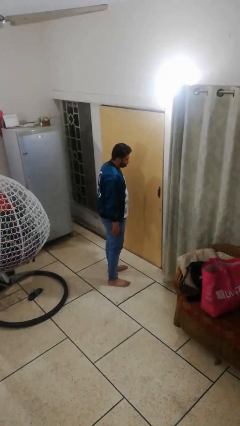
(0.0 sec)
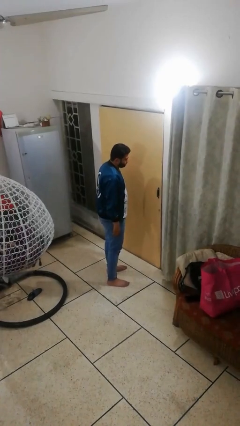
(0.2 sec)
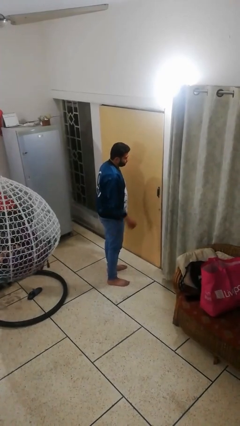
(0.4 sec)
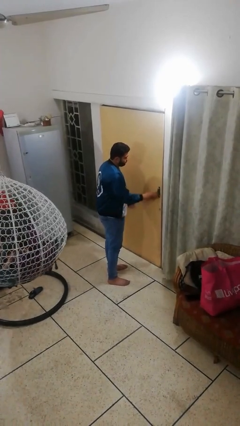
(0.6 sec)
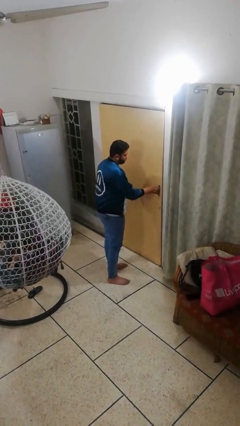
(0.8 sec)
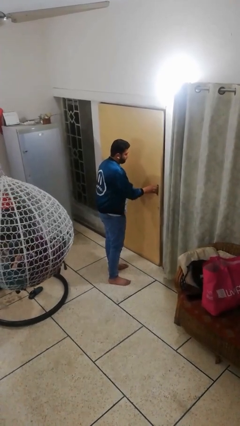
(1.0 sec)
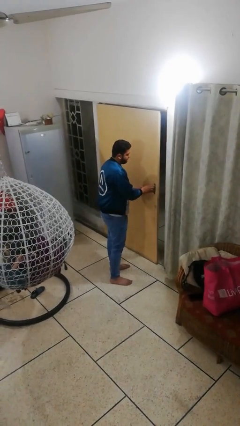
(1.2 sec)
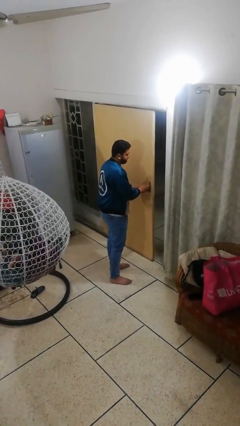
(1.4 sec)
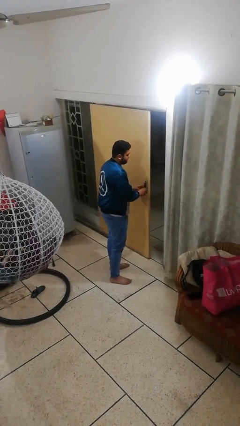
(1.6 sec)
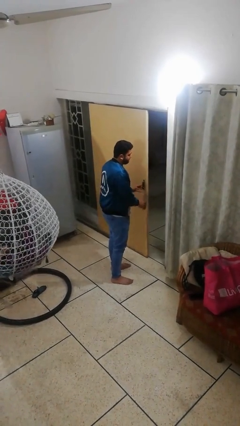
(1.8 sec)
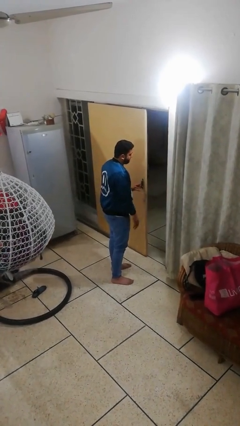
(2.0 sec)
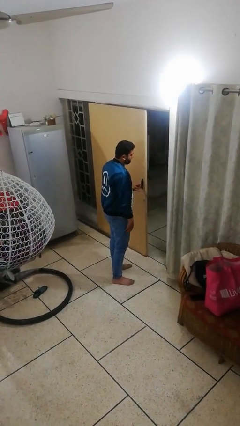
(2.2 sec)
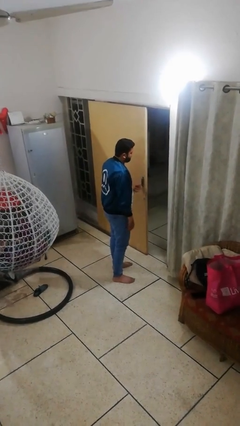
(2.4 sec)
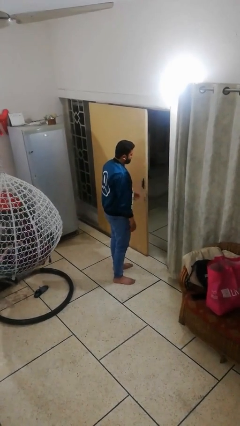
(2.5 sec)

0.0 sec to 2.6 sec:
person opens facility door

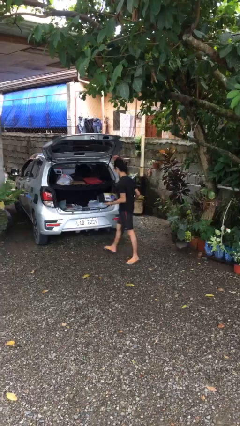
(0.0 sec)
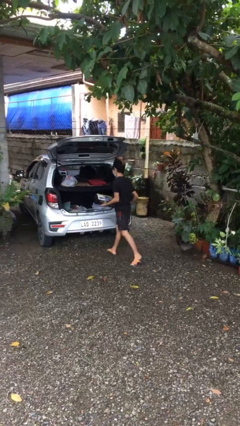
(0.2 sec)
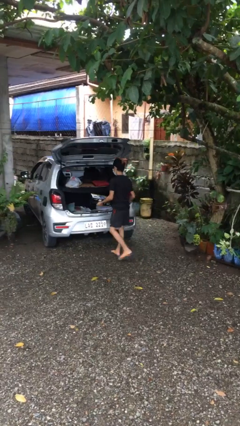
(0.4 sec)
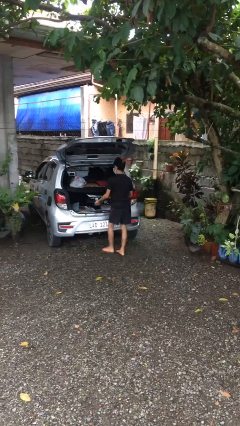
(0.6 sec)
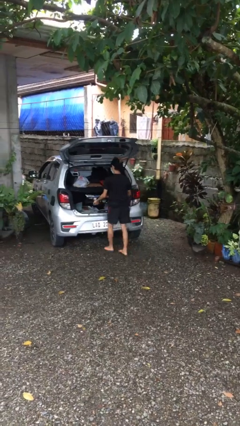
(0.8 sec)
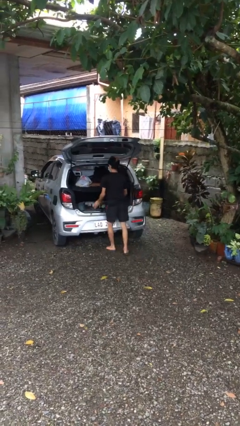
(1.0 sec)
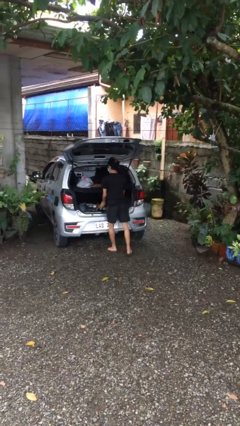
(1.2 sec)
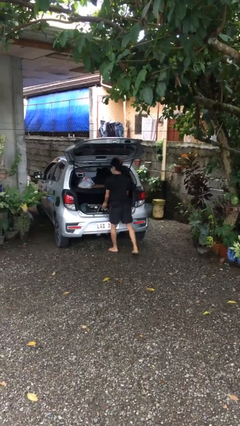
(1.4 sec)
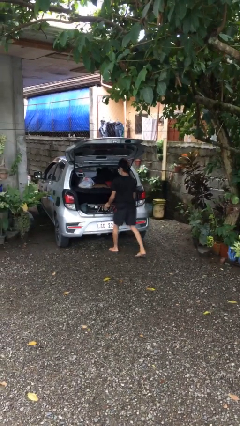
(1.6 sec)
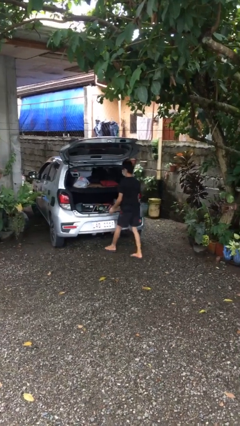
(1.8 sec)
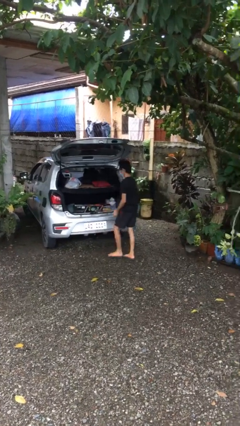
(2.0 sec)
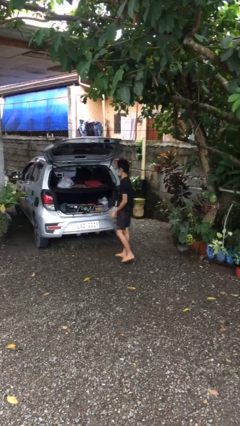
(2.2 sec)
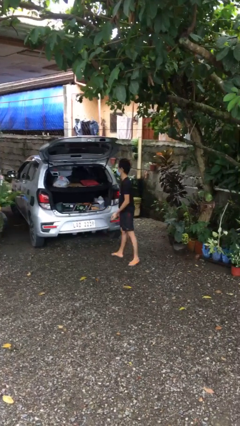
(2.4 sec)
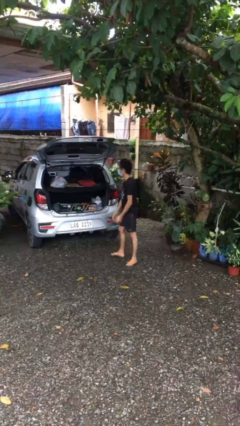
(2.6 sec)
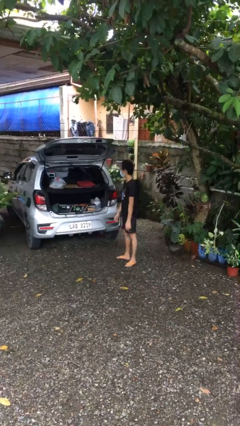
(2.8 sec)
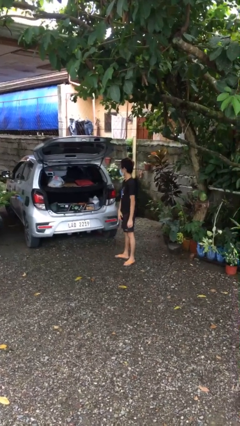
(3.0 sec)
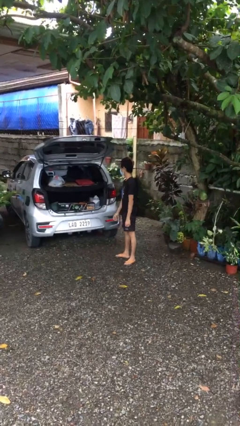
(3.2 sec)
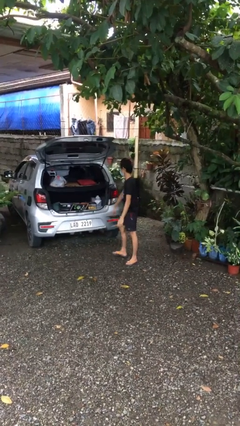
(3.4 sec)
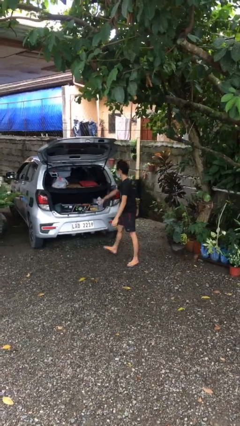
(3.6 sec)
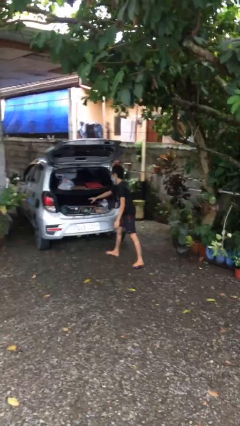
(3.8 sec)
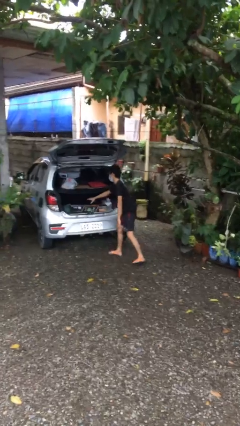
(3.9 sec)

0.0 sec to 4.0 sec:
person loads car

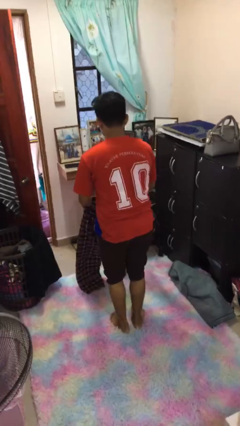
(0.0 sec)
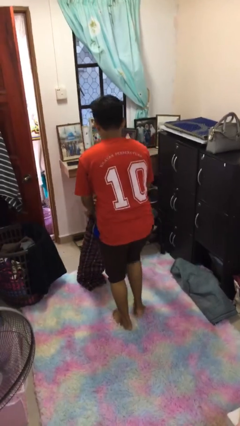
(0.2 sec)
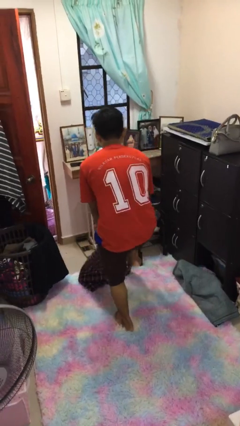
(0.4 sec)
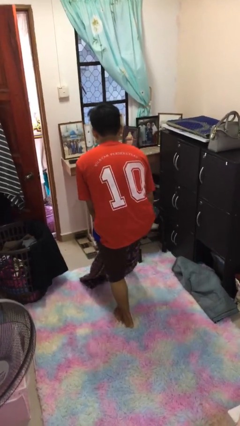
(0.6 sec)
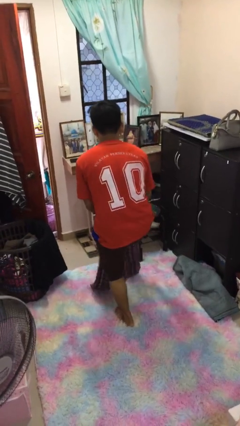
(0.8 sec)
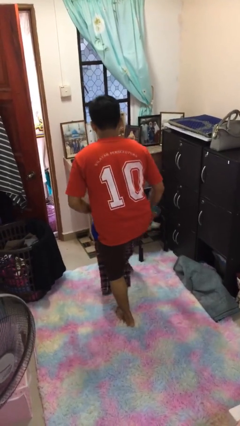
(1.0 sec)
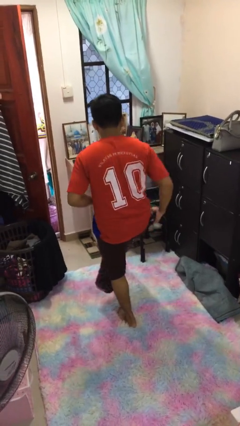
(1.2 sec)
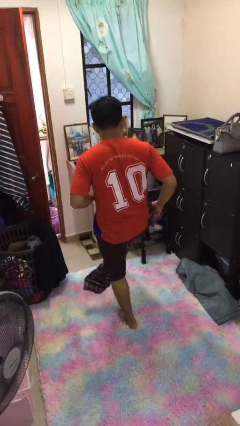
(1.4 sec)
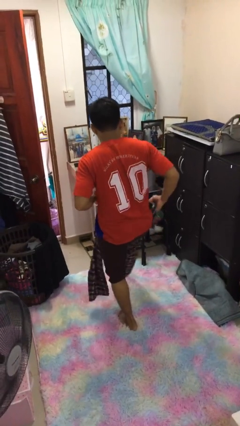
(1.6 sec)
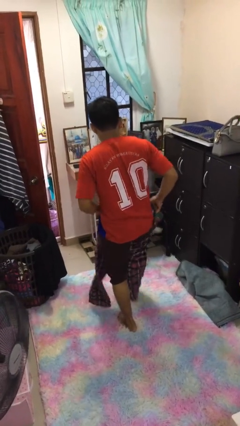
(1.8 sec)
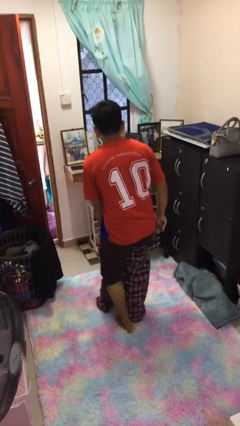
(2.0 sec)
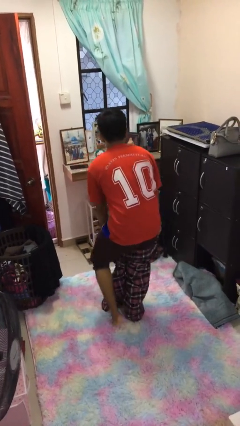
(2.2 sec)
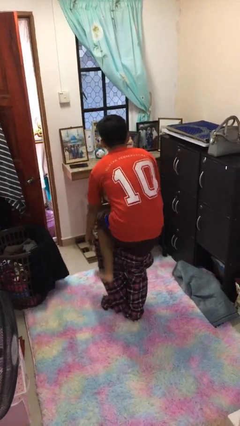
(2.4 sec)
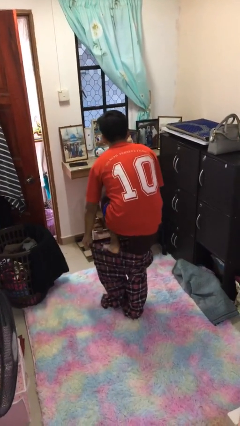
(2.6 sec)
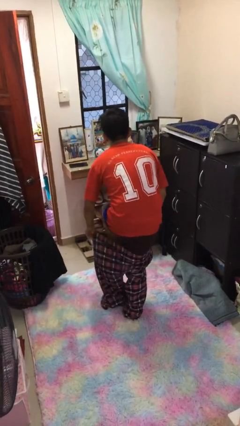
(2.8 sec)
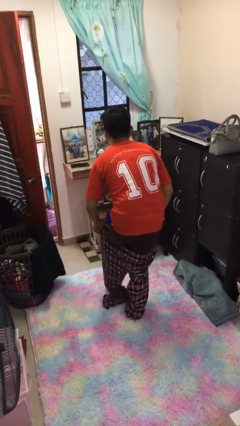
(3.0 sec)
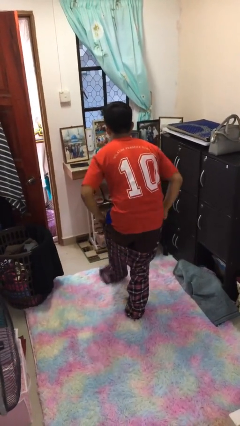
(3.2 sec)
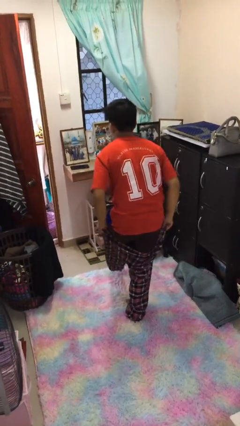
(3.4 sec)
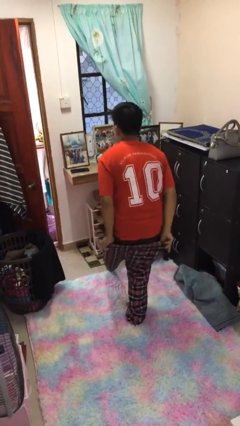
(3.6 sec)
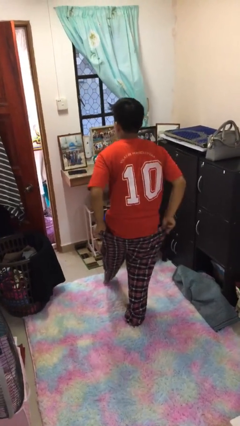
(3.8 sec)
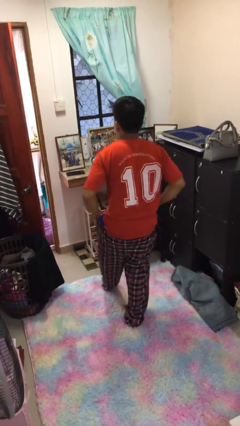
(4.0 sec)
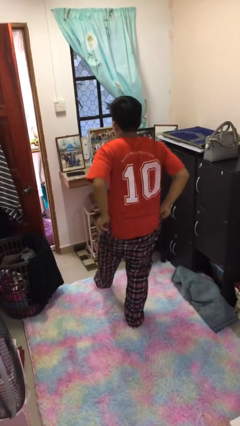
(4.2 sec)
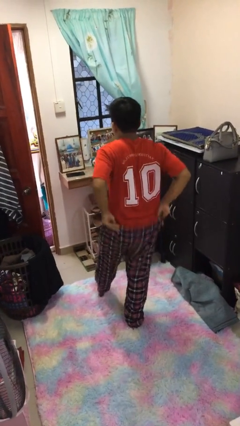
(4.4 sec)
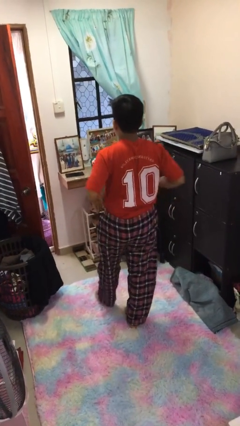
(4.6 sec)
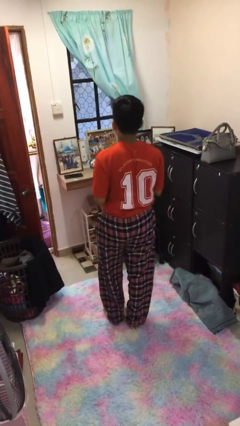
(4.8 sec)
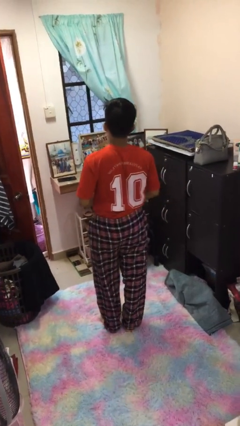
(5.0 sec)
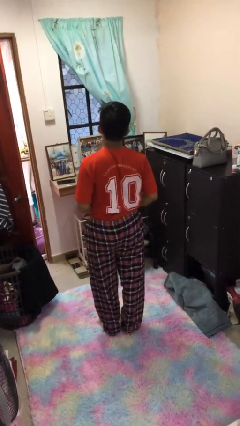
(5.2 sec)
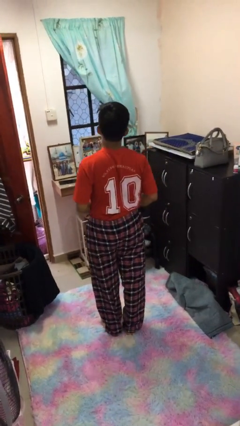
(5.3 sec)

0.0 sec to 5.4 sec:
person puts on pants

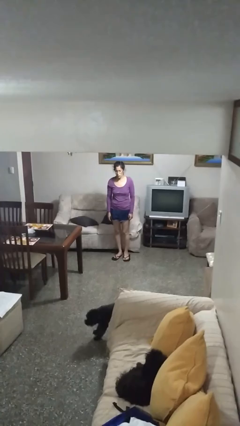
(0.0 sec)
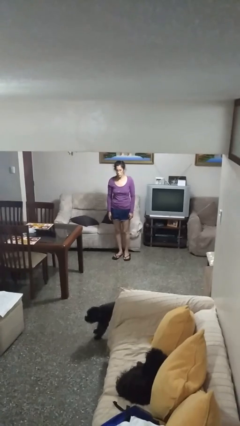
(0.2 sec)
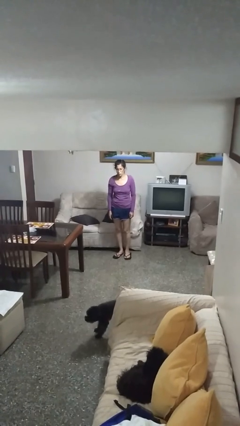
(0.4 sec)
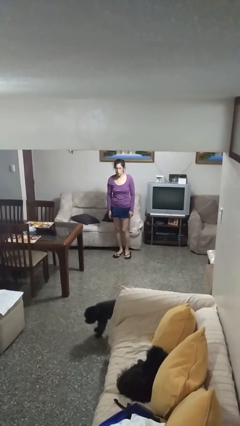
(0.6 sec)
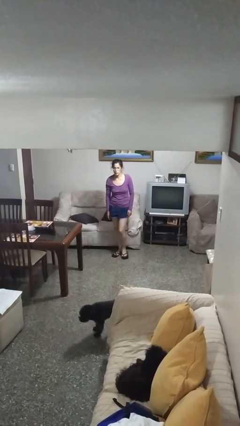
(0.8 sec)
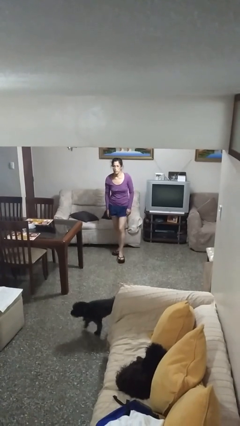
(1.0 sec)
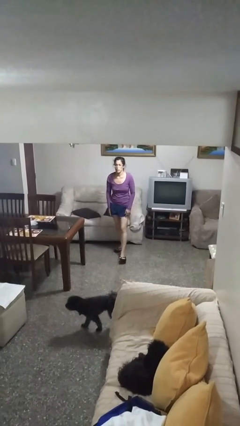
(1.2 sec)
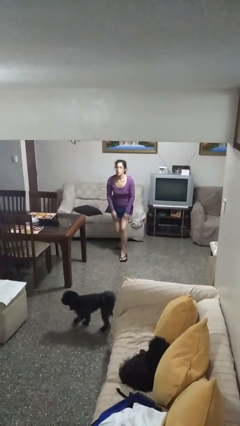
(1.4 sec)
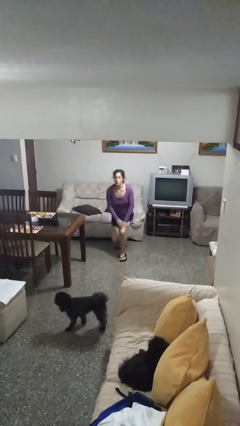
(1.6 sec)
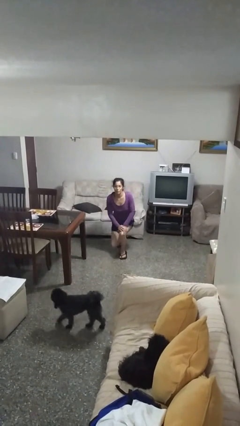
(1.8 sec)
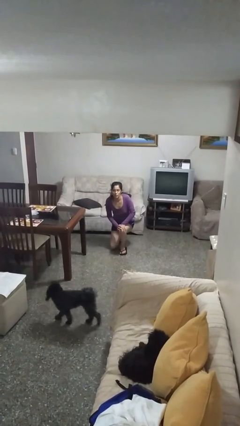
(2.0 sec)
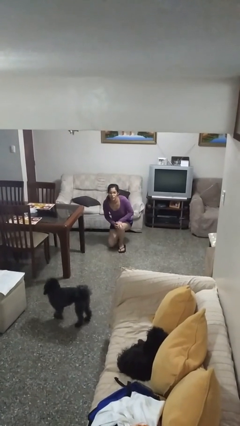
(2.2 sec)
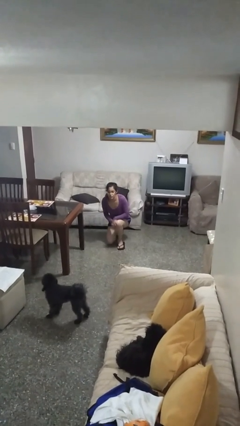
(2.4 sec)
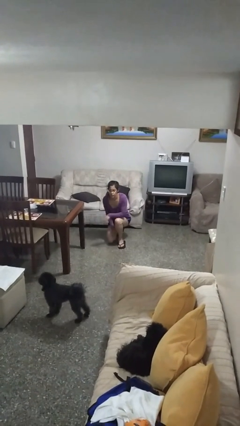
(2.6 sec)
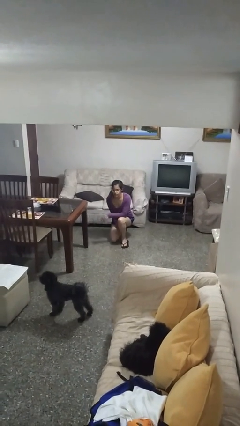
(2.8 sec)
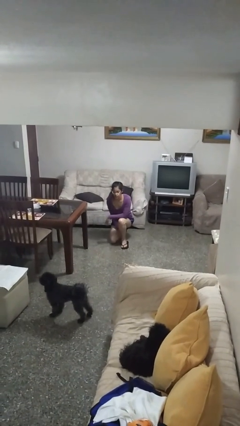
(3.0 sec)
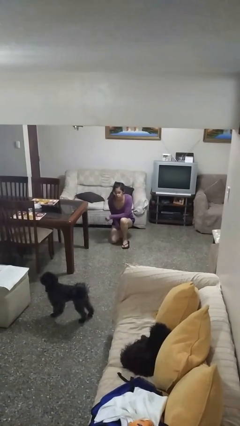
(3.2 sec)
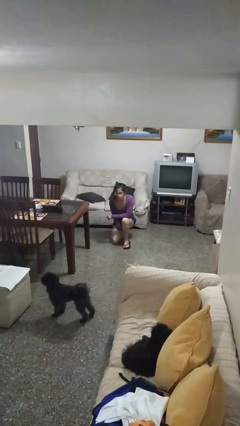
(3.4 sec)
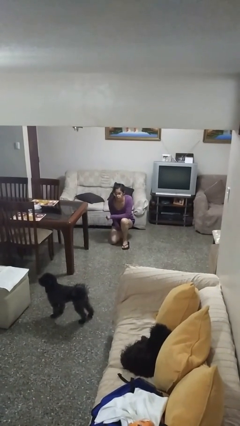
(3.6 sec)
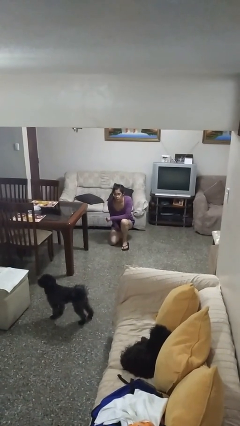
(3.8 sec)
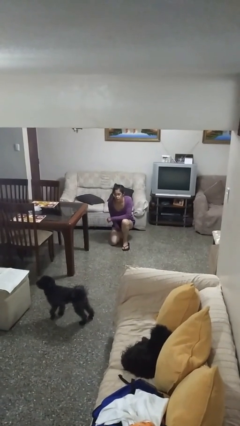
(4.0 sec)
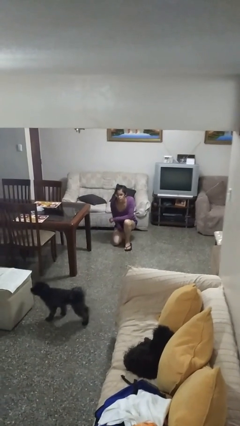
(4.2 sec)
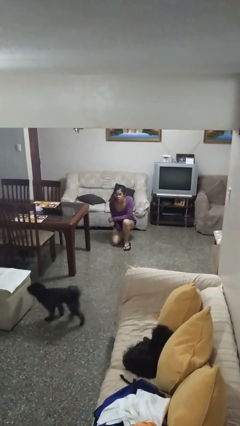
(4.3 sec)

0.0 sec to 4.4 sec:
person kneels

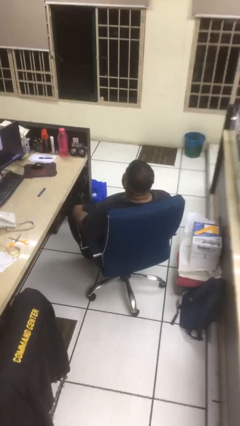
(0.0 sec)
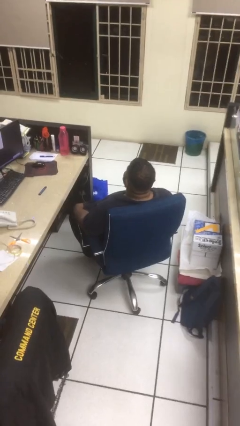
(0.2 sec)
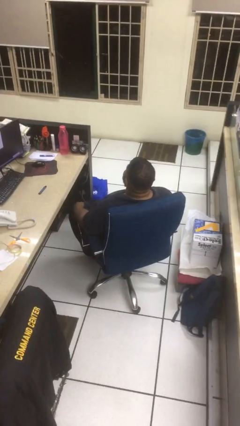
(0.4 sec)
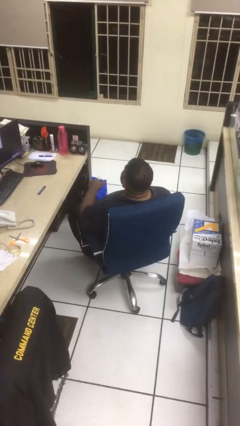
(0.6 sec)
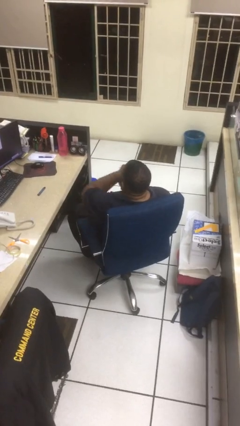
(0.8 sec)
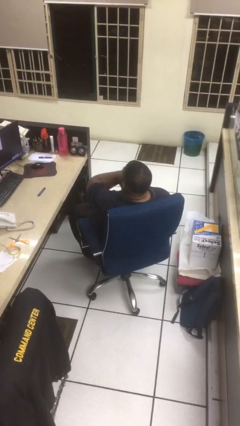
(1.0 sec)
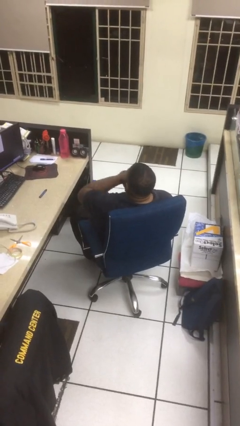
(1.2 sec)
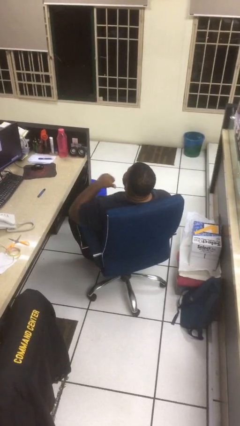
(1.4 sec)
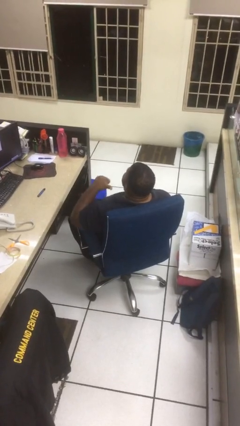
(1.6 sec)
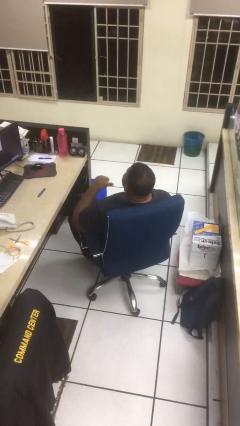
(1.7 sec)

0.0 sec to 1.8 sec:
person gestures cut
